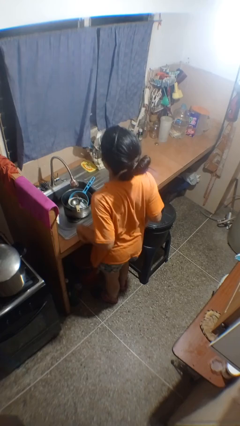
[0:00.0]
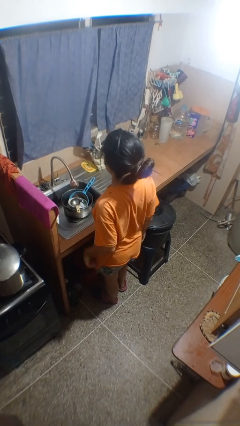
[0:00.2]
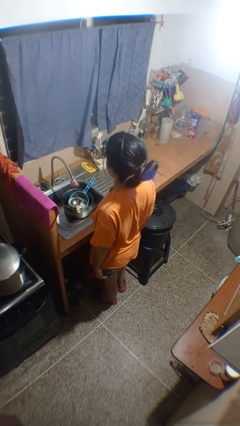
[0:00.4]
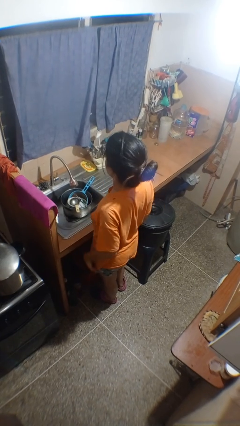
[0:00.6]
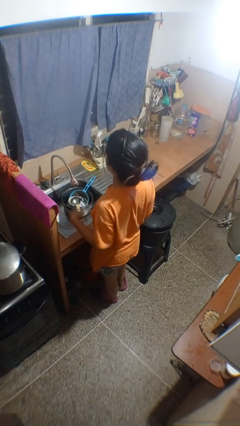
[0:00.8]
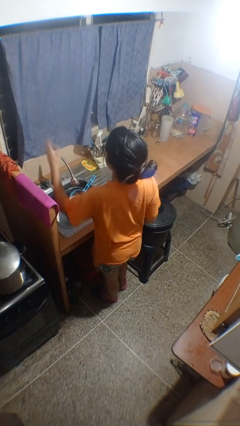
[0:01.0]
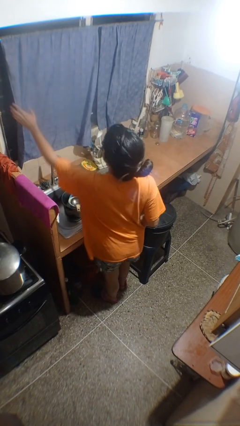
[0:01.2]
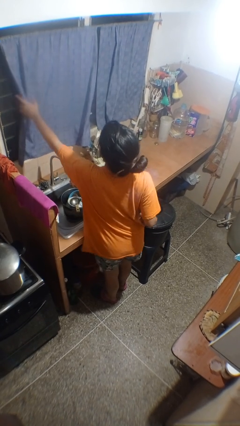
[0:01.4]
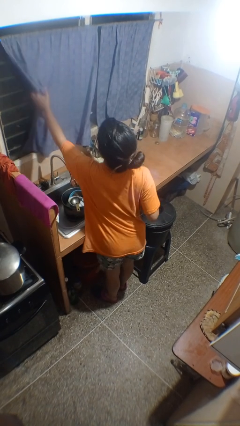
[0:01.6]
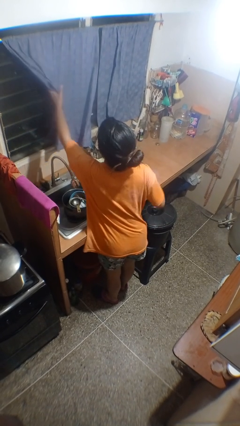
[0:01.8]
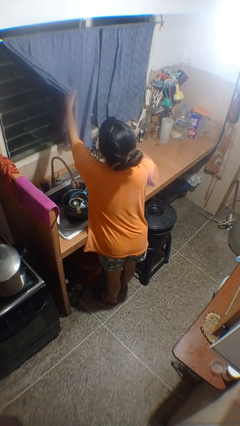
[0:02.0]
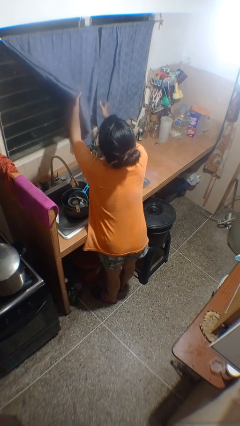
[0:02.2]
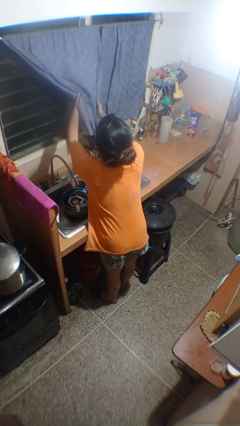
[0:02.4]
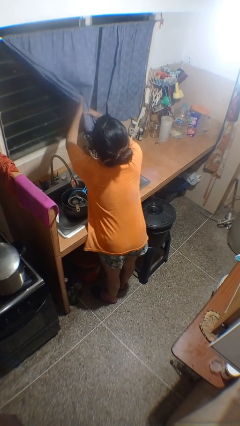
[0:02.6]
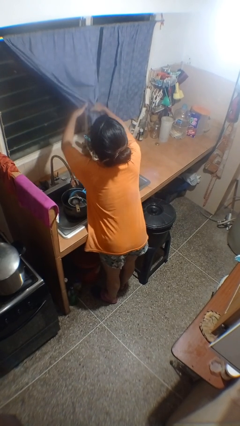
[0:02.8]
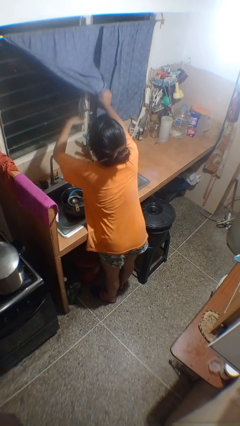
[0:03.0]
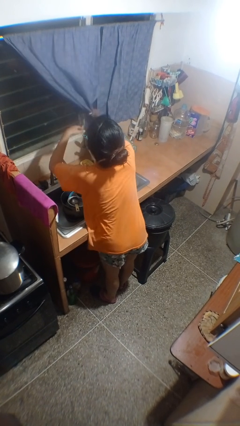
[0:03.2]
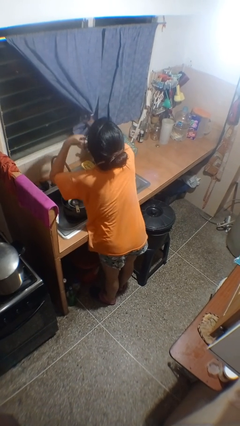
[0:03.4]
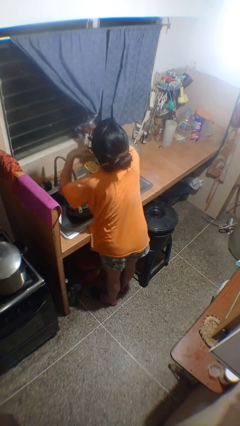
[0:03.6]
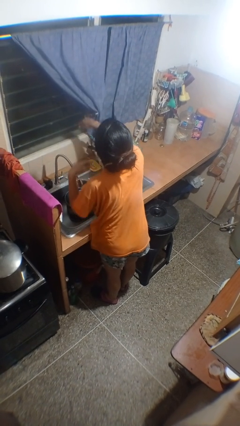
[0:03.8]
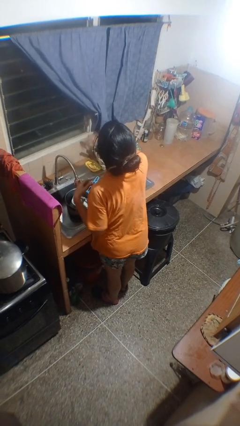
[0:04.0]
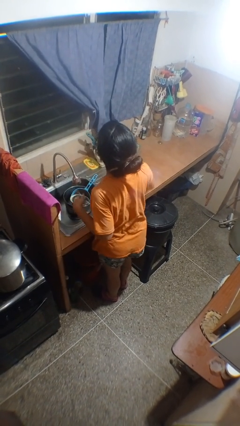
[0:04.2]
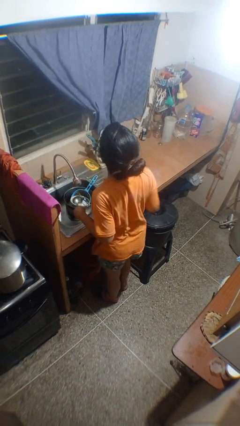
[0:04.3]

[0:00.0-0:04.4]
person opens curtains

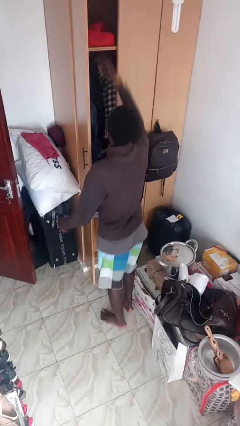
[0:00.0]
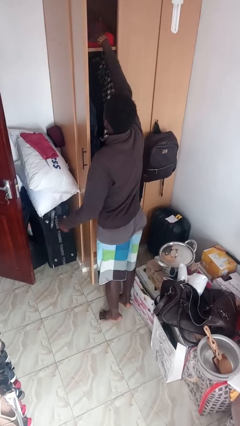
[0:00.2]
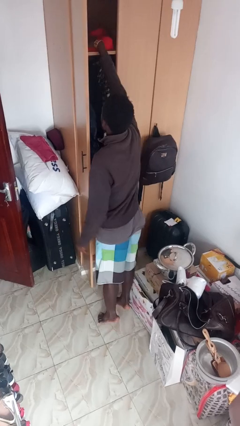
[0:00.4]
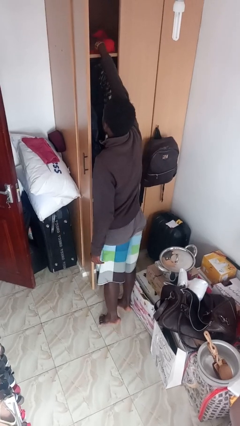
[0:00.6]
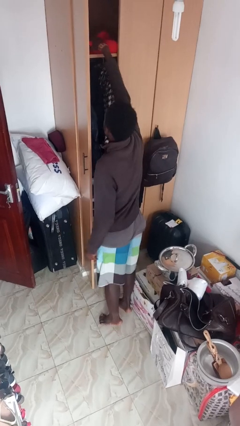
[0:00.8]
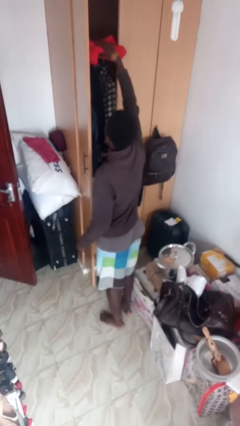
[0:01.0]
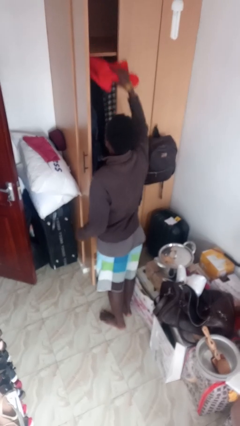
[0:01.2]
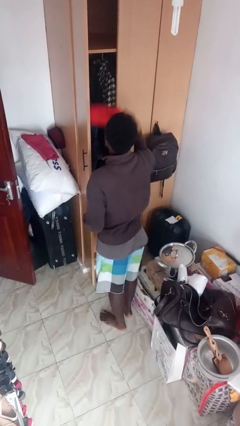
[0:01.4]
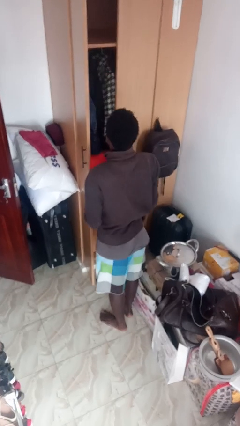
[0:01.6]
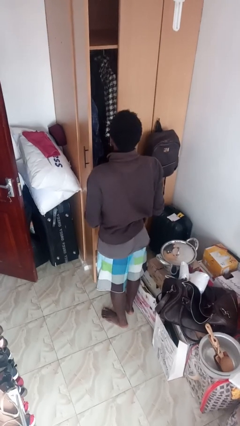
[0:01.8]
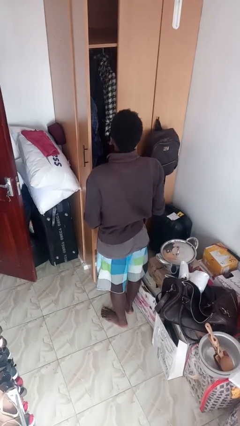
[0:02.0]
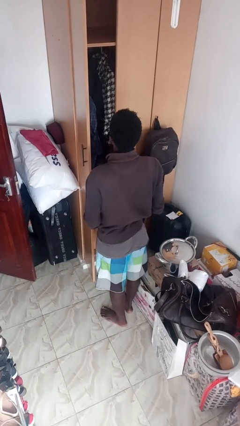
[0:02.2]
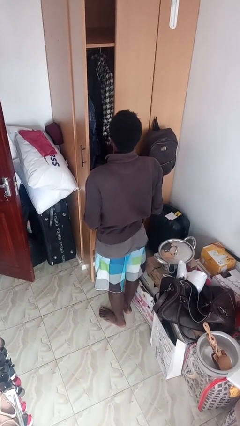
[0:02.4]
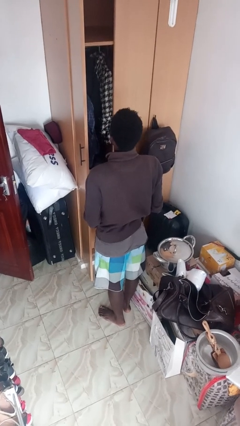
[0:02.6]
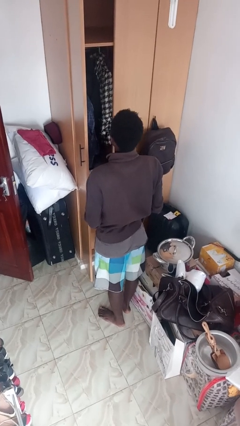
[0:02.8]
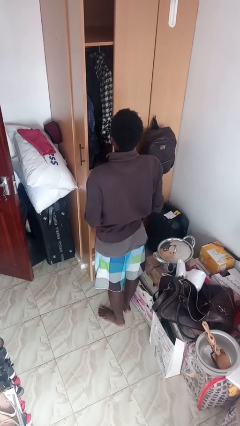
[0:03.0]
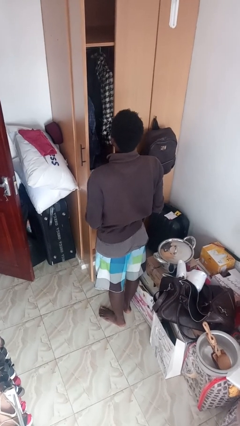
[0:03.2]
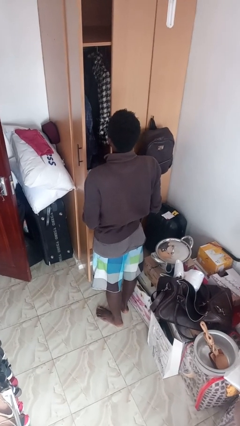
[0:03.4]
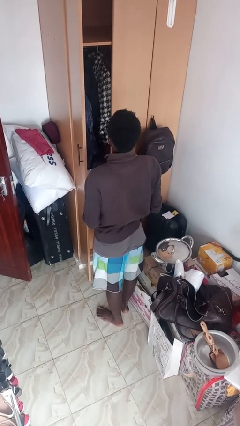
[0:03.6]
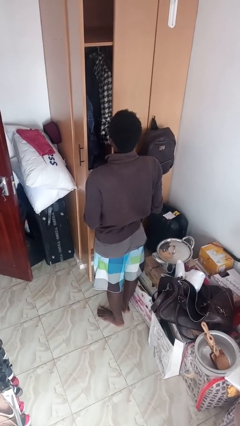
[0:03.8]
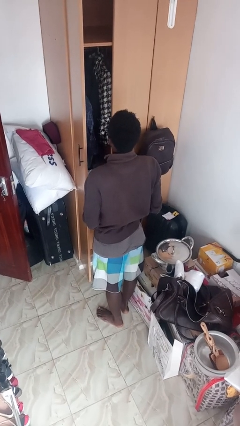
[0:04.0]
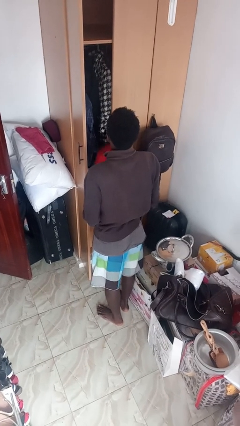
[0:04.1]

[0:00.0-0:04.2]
person picks up object from shelf

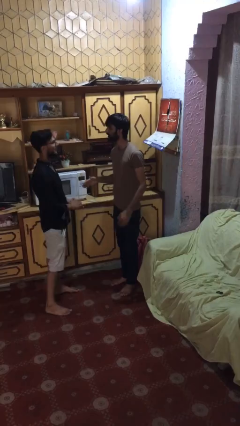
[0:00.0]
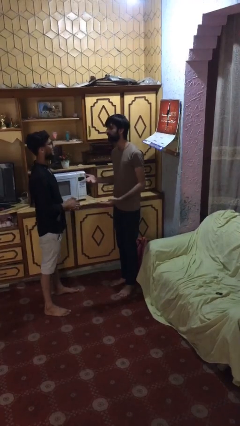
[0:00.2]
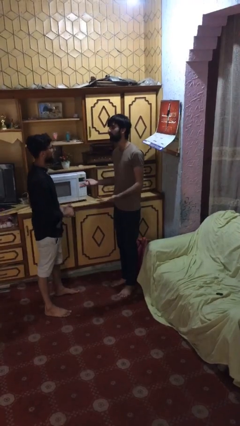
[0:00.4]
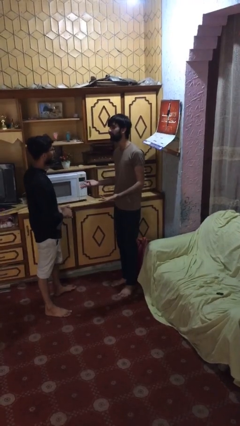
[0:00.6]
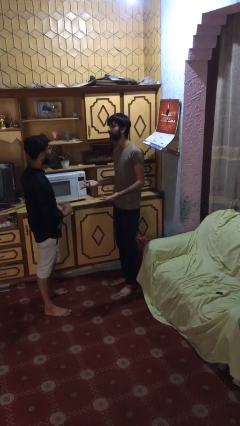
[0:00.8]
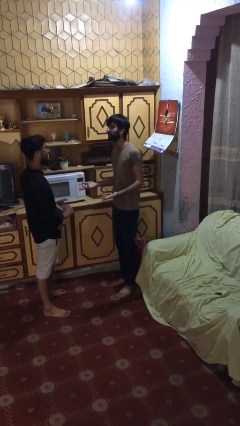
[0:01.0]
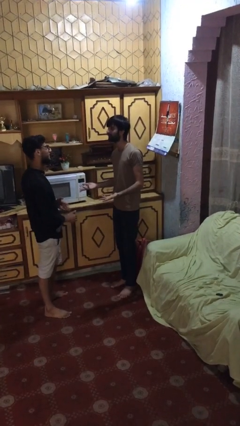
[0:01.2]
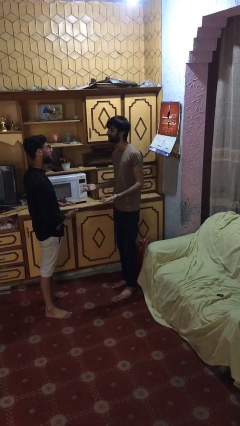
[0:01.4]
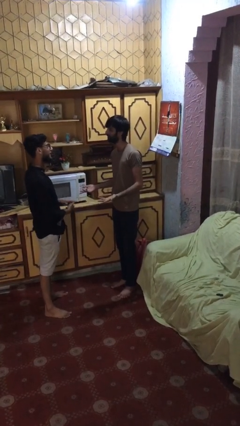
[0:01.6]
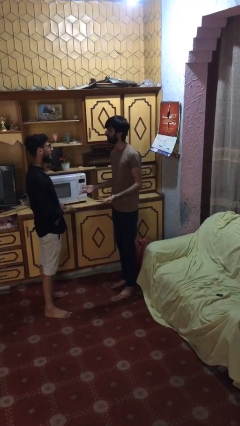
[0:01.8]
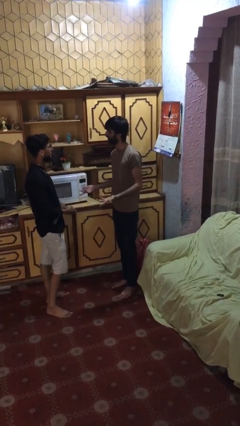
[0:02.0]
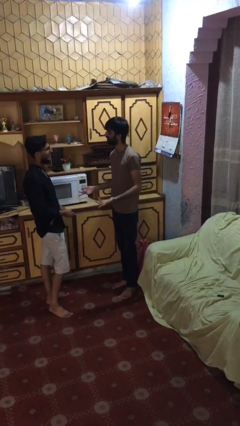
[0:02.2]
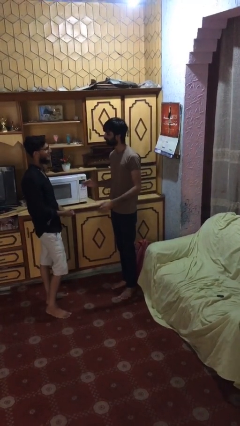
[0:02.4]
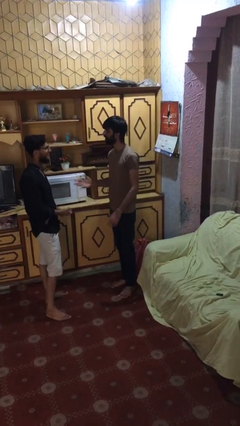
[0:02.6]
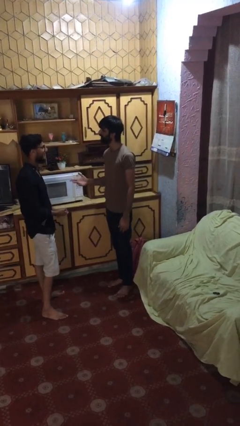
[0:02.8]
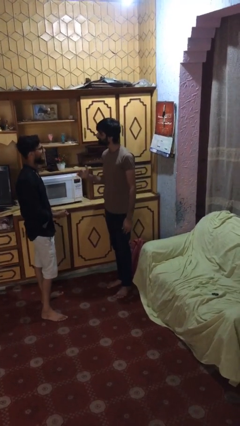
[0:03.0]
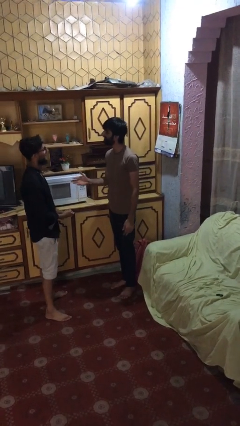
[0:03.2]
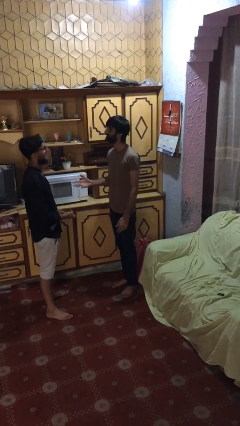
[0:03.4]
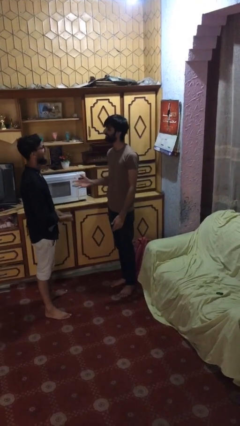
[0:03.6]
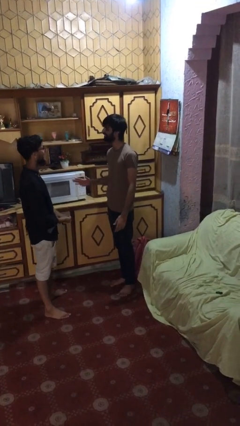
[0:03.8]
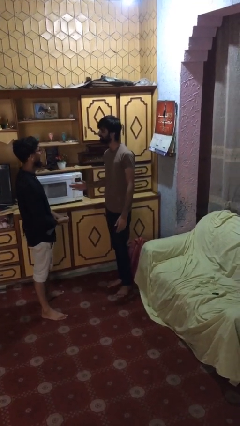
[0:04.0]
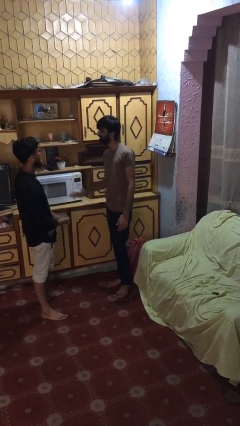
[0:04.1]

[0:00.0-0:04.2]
person talks to person

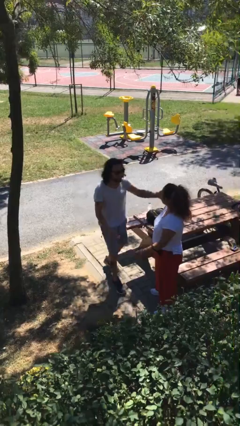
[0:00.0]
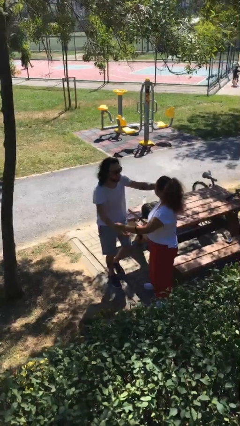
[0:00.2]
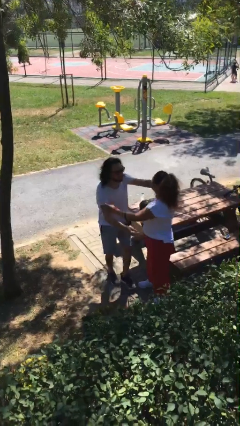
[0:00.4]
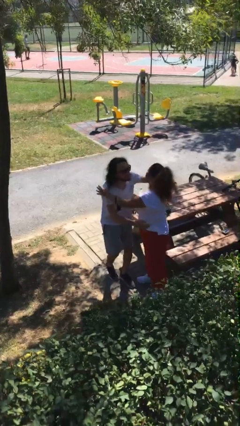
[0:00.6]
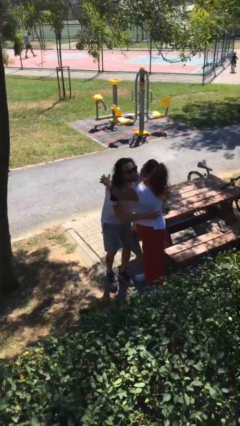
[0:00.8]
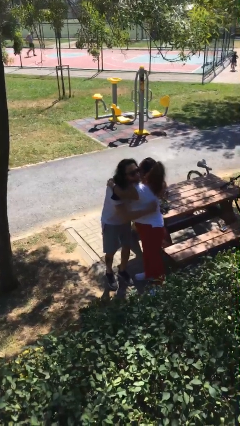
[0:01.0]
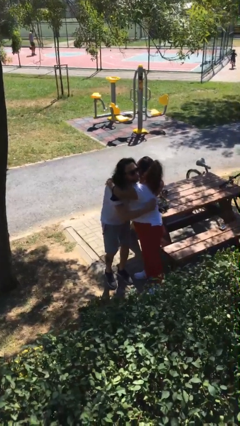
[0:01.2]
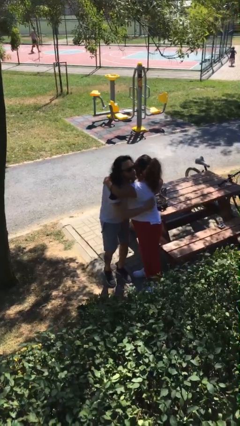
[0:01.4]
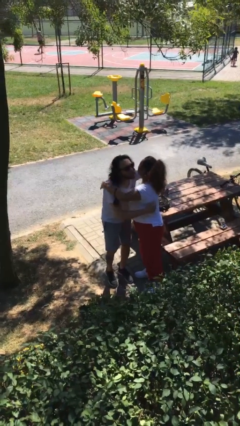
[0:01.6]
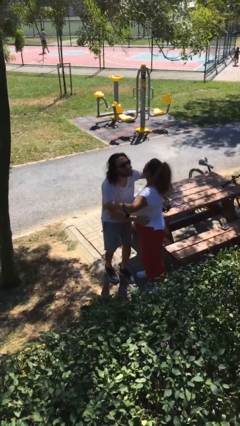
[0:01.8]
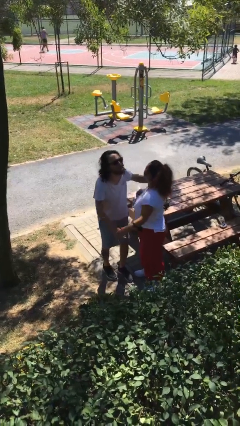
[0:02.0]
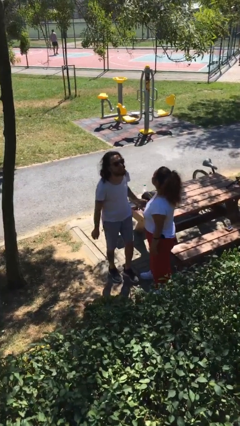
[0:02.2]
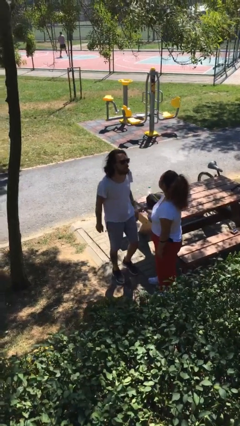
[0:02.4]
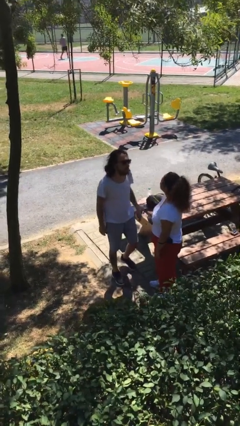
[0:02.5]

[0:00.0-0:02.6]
person embraces person

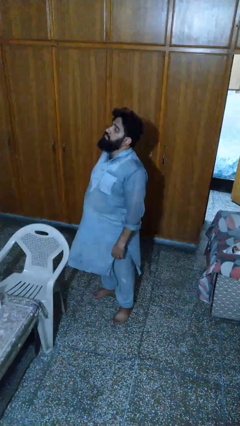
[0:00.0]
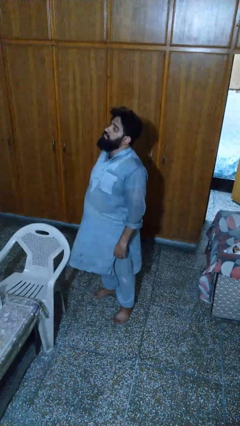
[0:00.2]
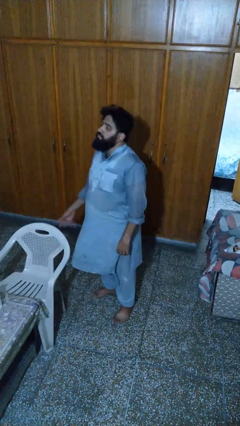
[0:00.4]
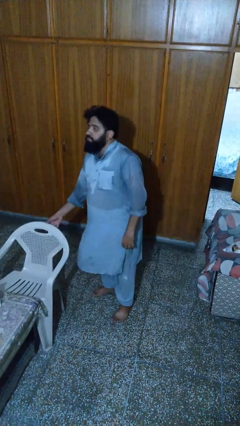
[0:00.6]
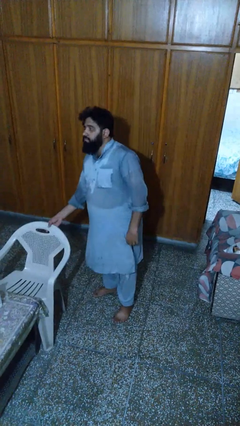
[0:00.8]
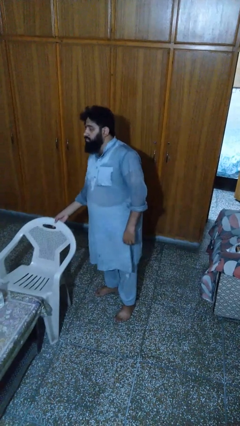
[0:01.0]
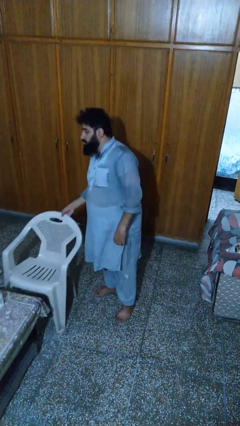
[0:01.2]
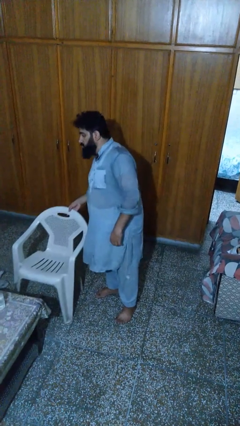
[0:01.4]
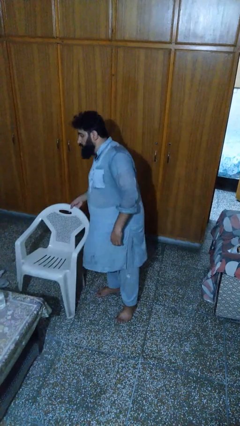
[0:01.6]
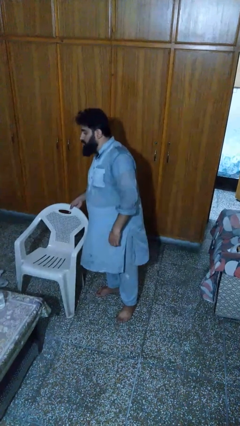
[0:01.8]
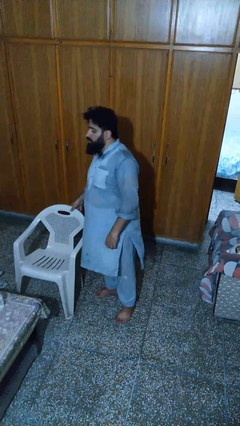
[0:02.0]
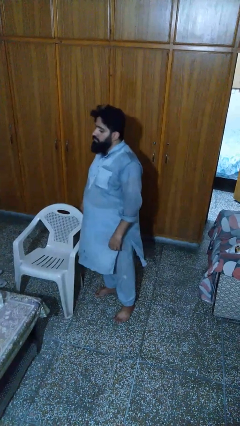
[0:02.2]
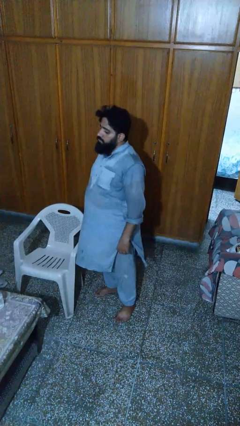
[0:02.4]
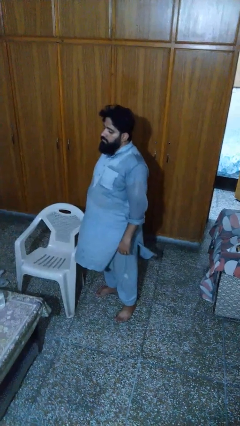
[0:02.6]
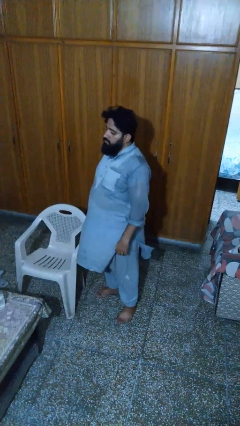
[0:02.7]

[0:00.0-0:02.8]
person pulls out chair
